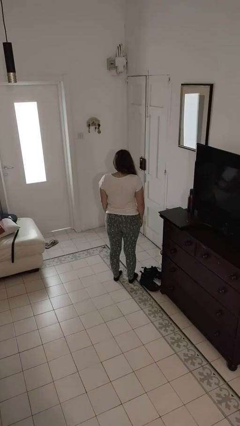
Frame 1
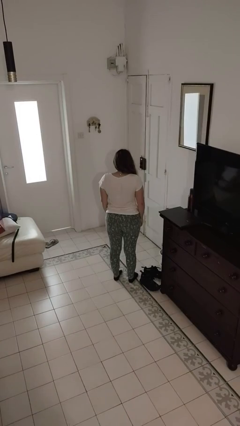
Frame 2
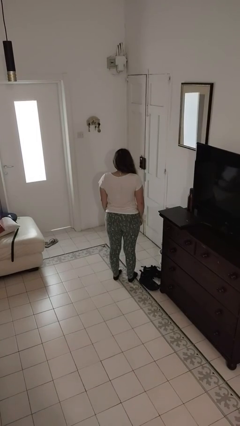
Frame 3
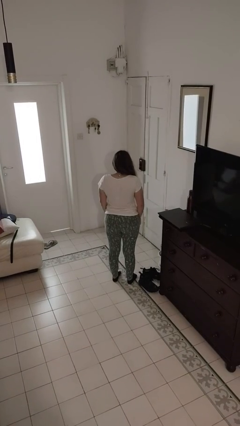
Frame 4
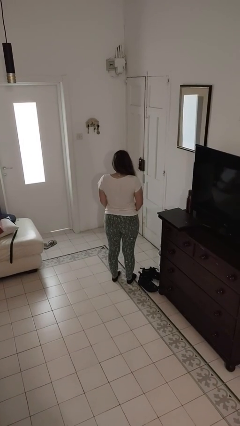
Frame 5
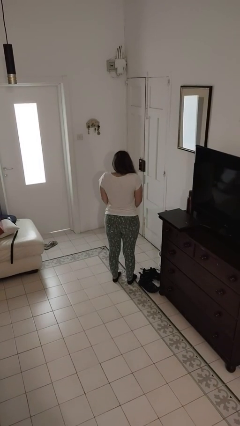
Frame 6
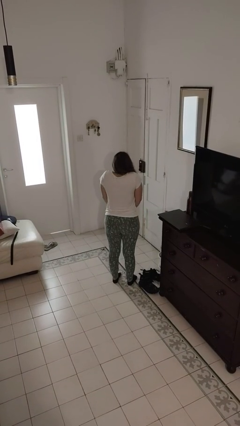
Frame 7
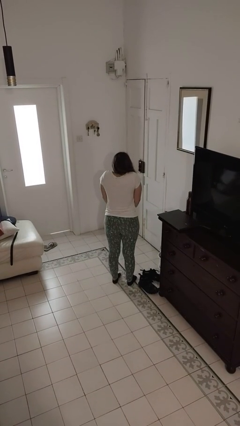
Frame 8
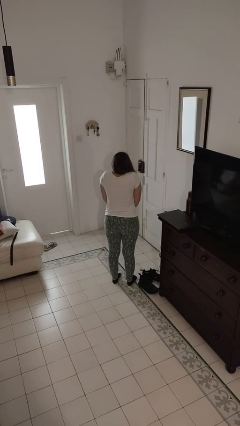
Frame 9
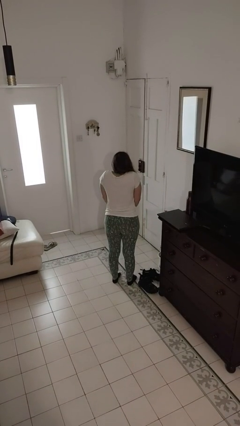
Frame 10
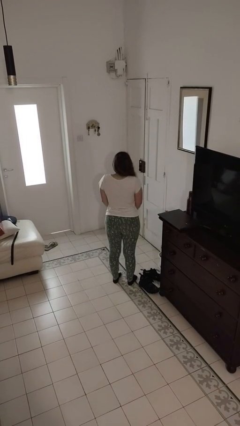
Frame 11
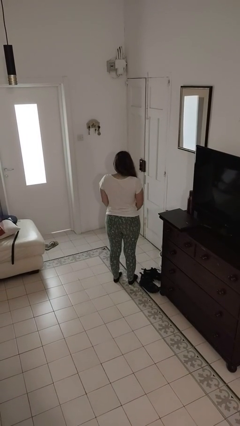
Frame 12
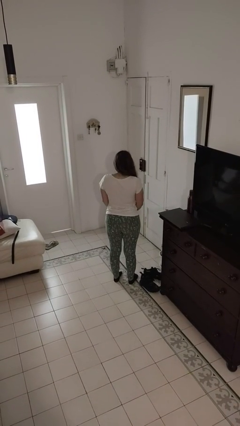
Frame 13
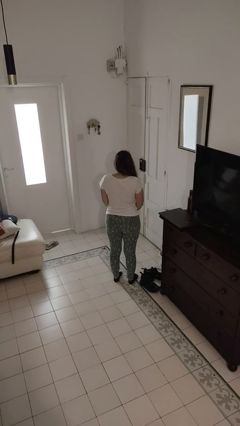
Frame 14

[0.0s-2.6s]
person shrugs

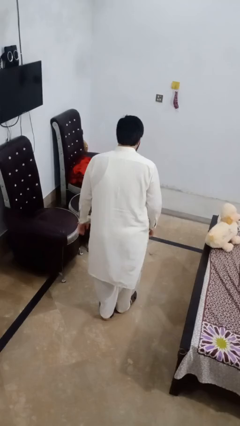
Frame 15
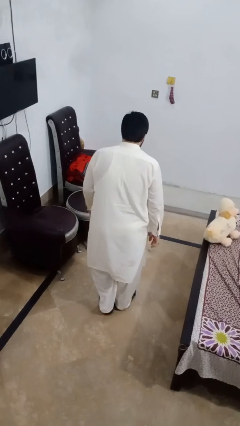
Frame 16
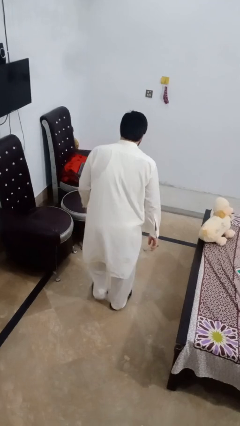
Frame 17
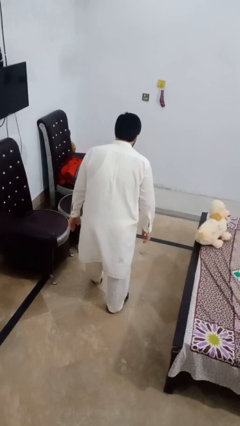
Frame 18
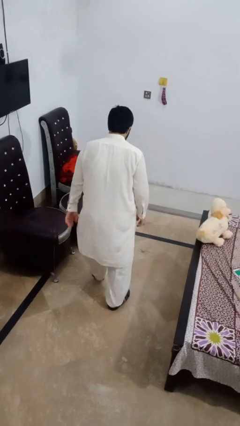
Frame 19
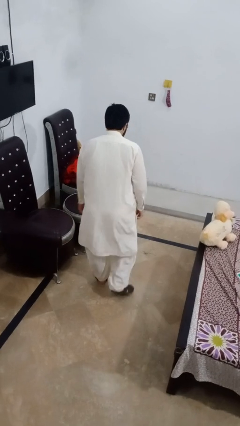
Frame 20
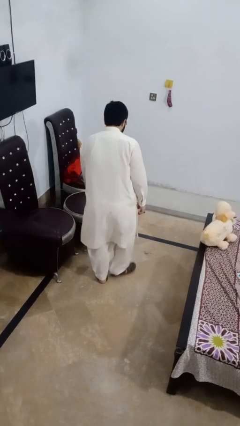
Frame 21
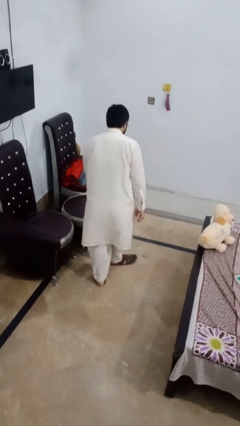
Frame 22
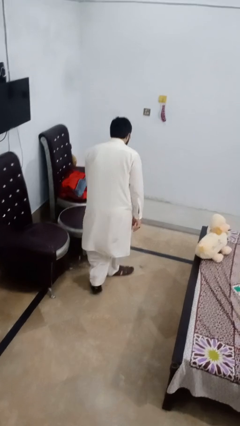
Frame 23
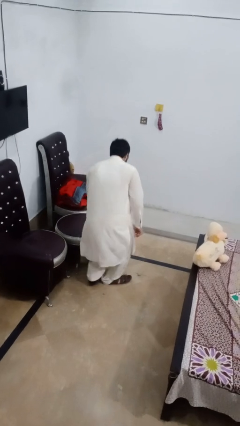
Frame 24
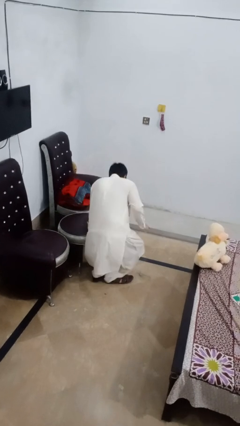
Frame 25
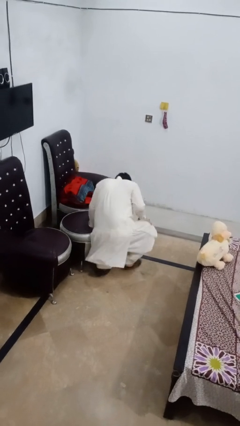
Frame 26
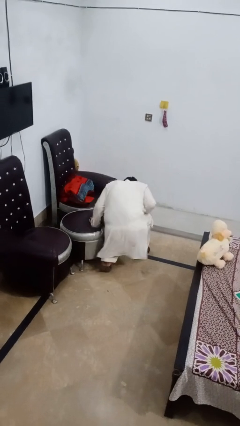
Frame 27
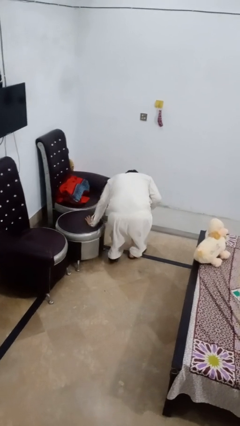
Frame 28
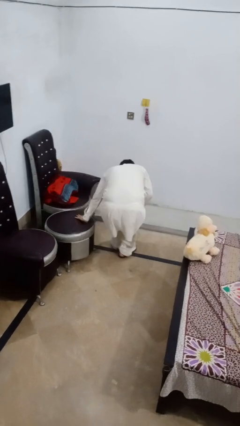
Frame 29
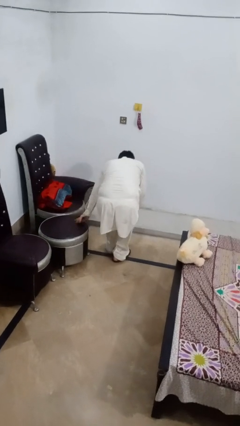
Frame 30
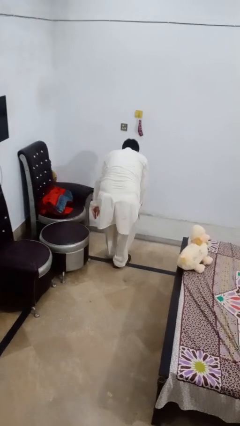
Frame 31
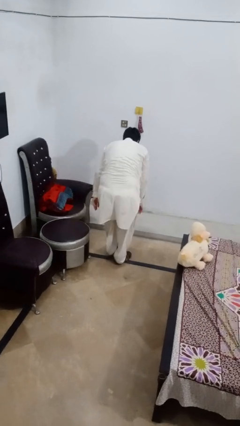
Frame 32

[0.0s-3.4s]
person trips on object on floor

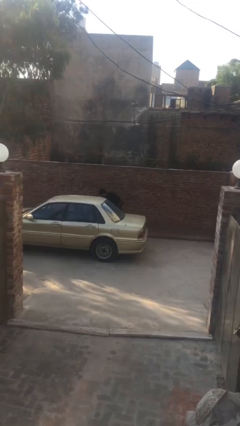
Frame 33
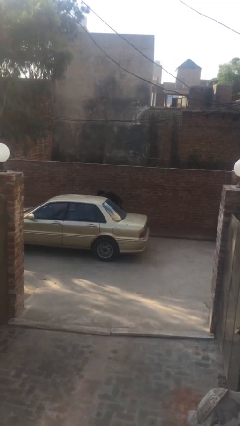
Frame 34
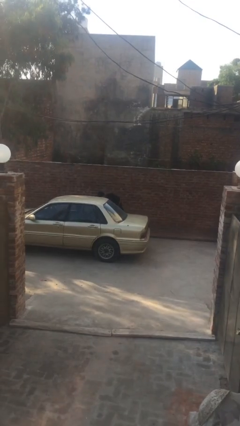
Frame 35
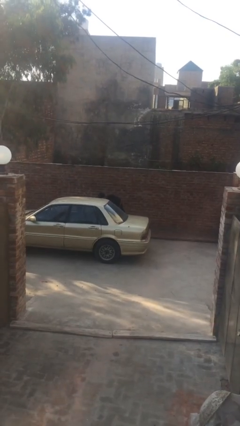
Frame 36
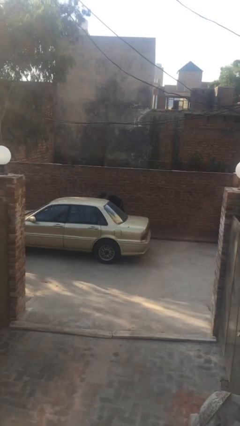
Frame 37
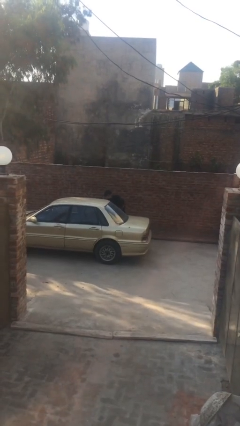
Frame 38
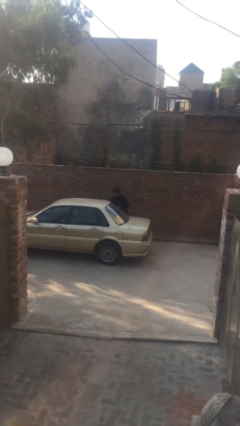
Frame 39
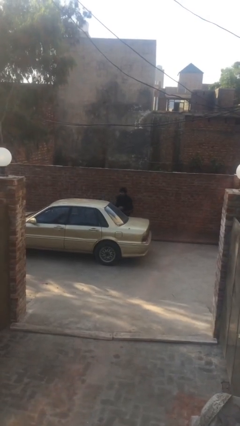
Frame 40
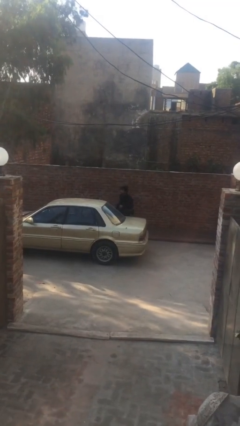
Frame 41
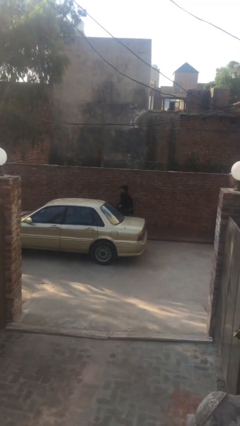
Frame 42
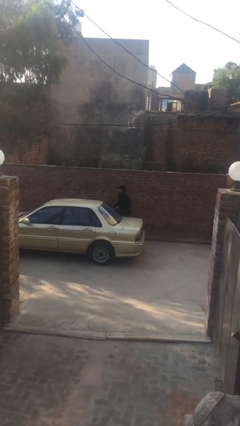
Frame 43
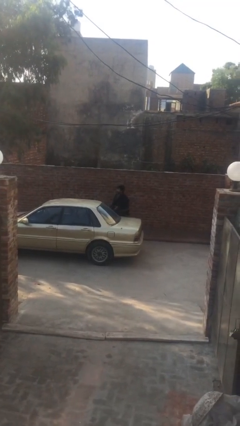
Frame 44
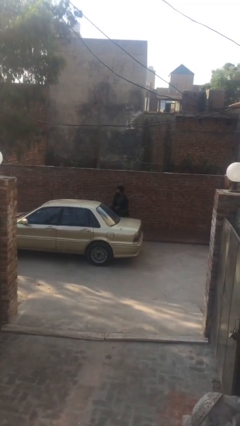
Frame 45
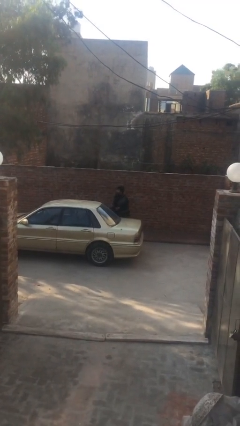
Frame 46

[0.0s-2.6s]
person unloads car

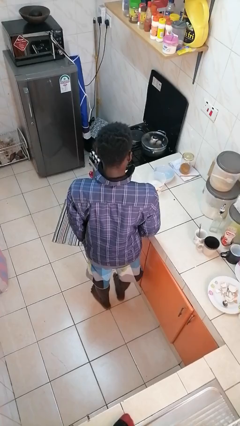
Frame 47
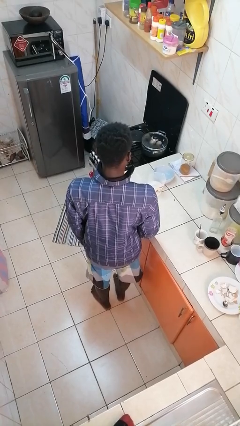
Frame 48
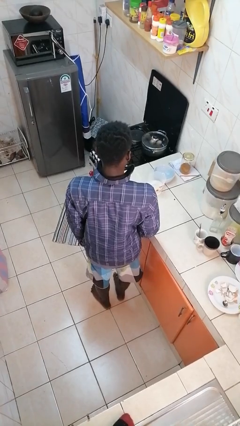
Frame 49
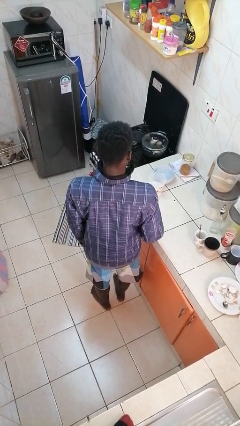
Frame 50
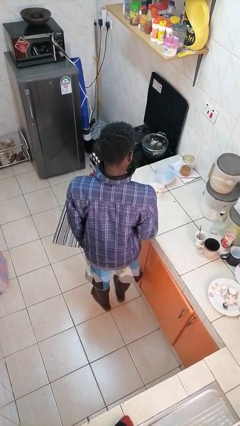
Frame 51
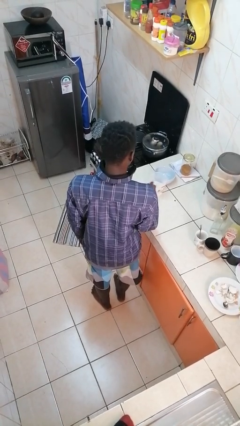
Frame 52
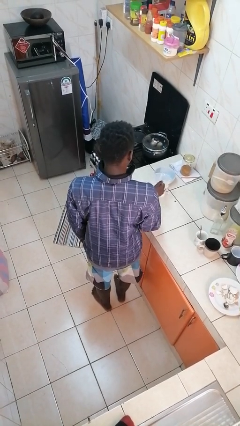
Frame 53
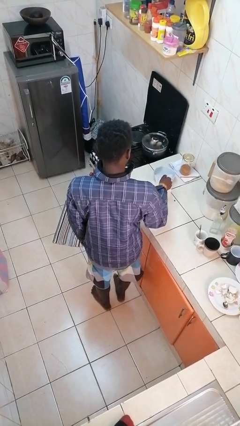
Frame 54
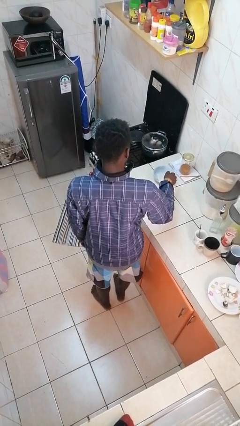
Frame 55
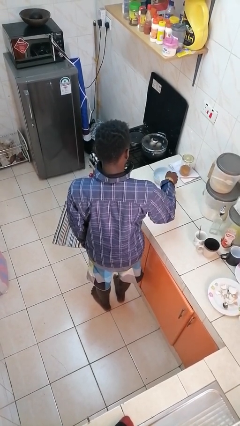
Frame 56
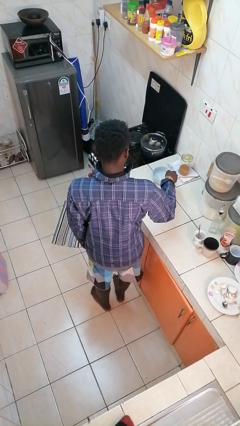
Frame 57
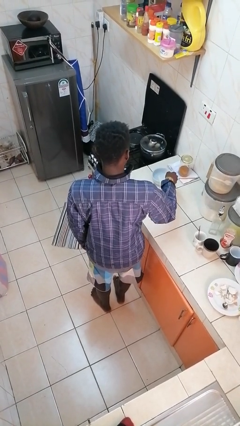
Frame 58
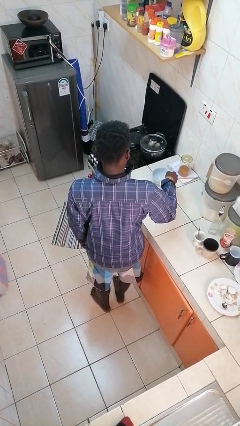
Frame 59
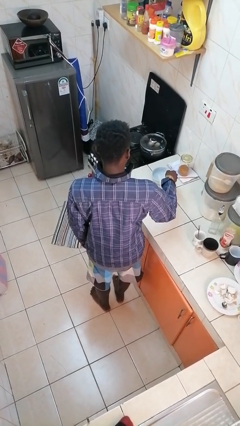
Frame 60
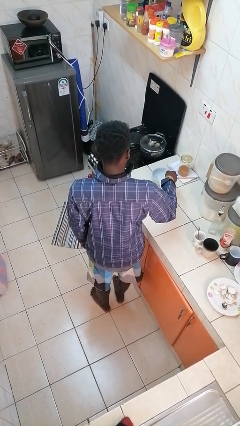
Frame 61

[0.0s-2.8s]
person pours into bowl

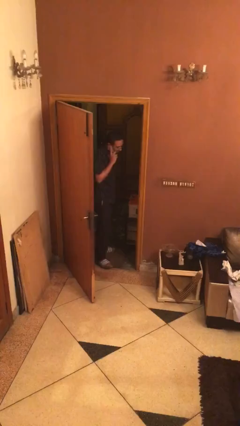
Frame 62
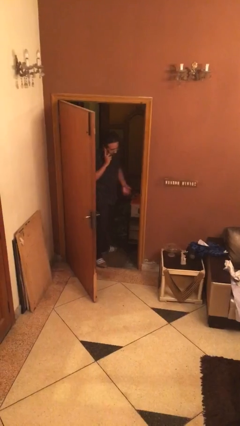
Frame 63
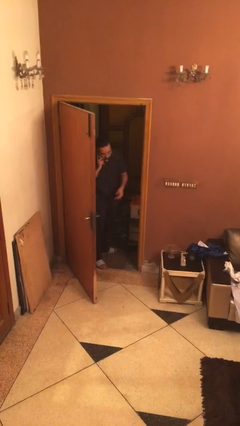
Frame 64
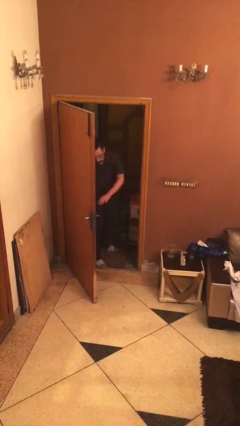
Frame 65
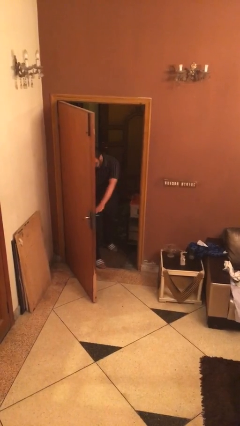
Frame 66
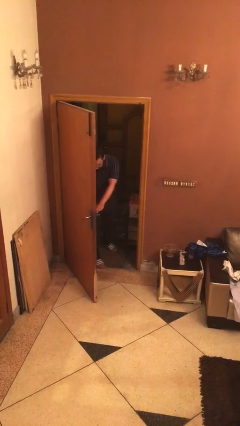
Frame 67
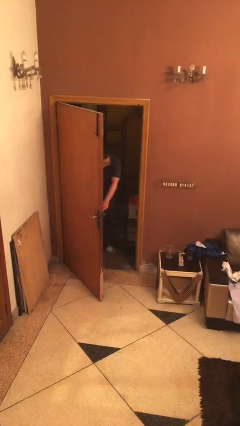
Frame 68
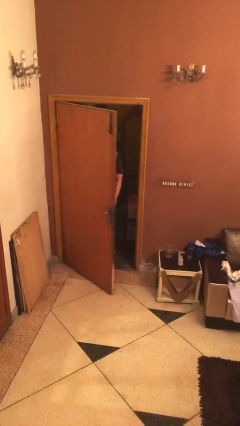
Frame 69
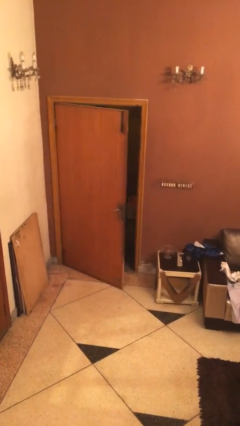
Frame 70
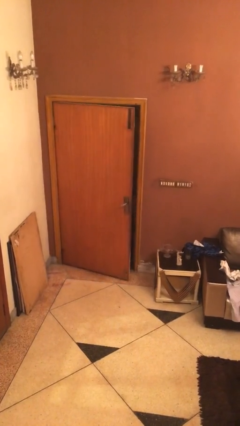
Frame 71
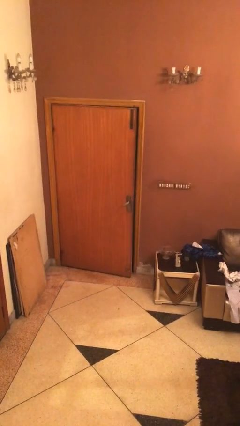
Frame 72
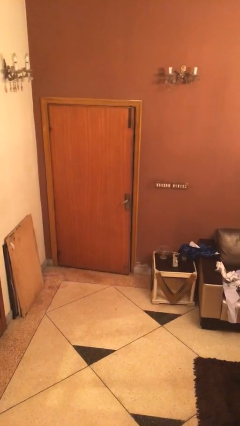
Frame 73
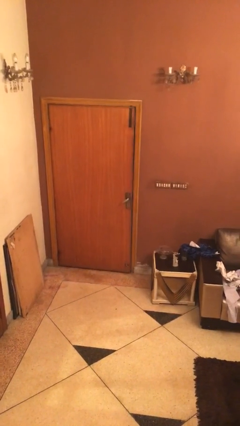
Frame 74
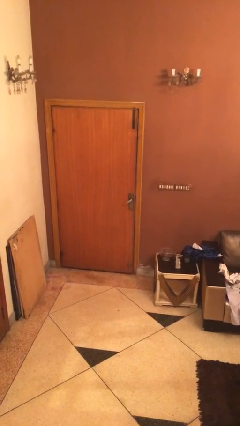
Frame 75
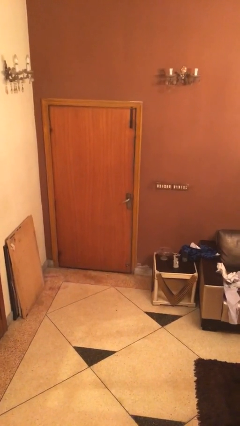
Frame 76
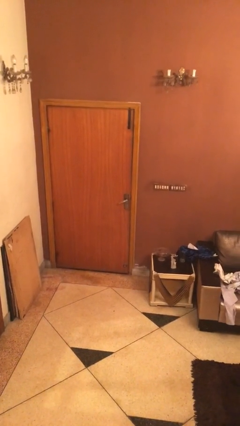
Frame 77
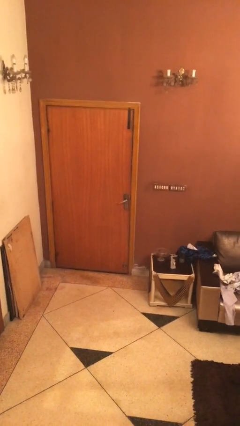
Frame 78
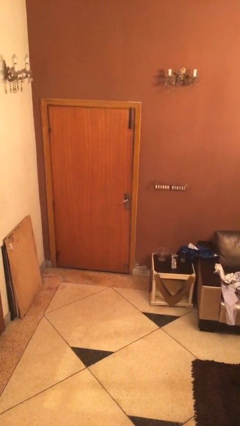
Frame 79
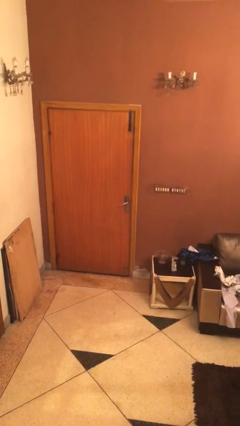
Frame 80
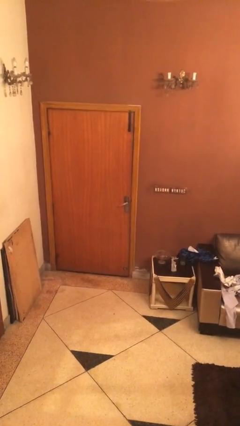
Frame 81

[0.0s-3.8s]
person closes facility door

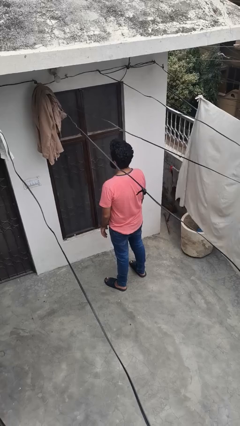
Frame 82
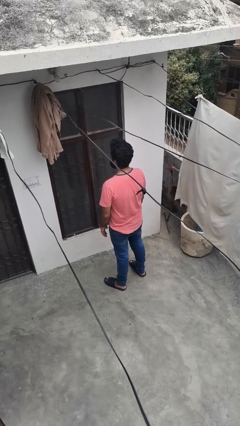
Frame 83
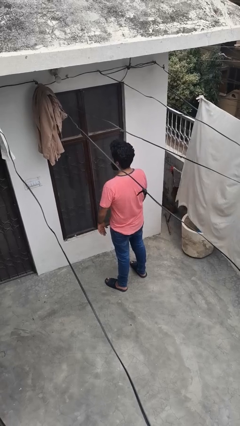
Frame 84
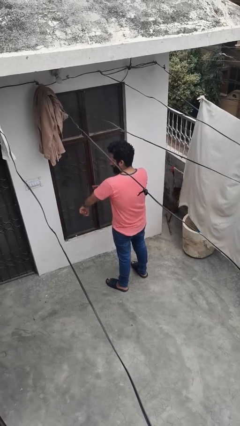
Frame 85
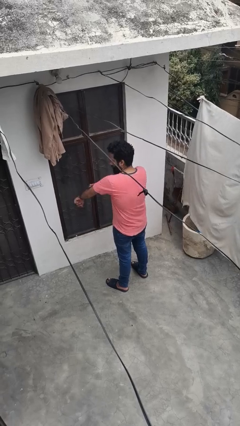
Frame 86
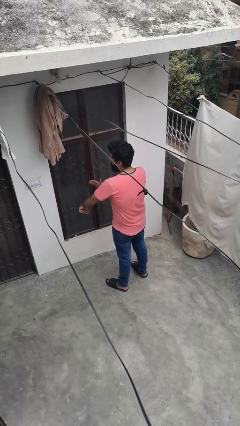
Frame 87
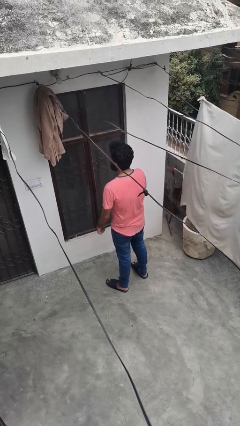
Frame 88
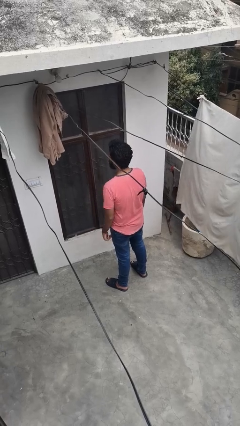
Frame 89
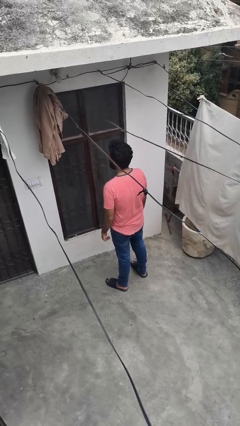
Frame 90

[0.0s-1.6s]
person swats bug

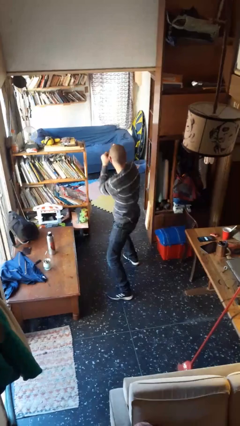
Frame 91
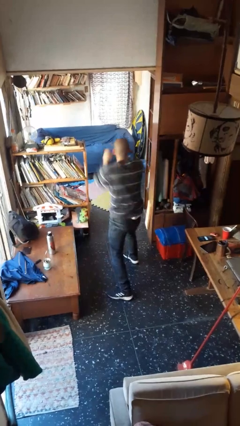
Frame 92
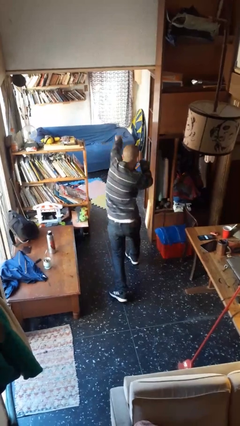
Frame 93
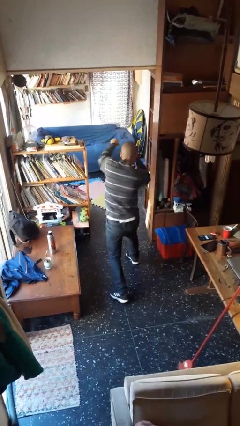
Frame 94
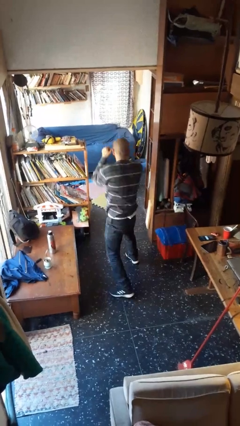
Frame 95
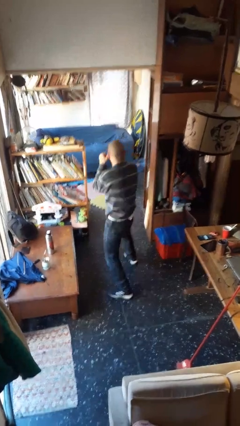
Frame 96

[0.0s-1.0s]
person punches
